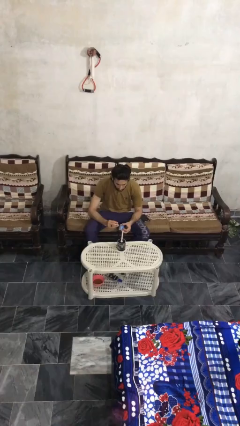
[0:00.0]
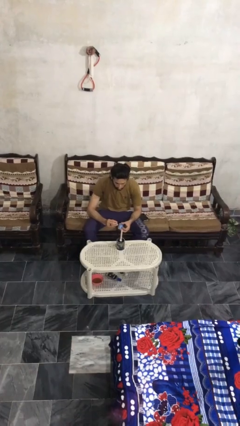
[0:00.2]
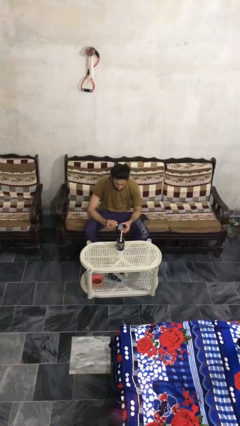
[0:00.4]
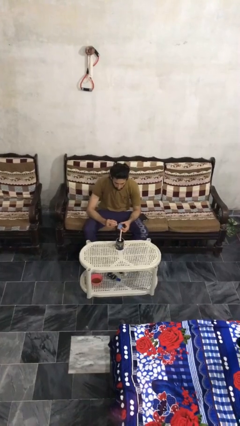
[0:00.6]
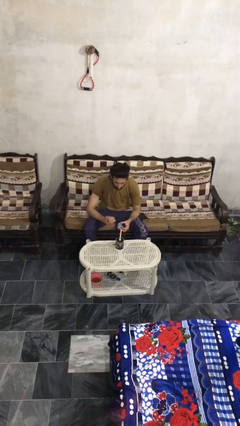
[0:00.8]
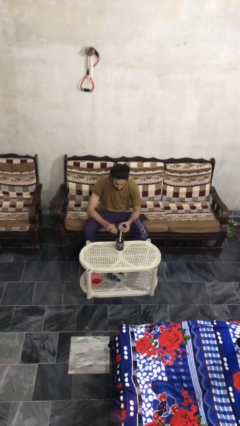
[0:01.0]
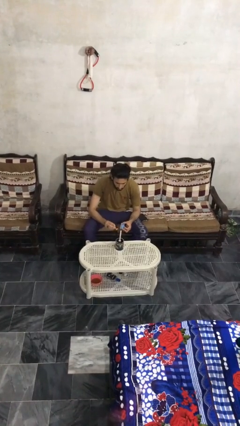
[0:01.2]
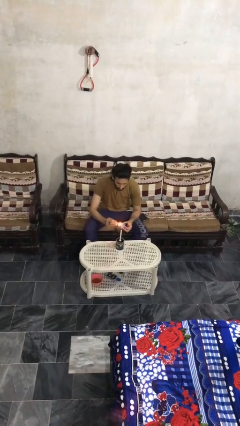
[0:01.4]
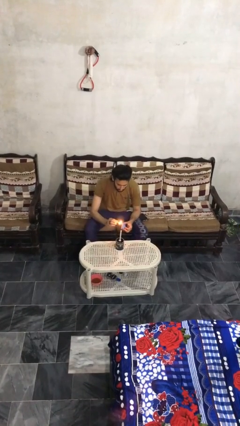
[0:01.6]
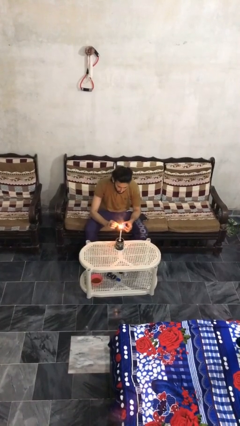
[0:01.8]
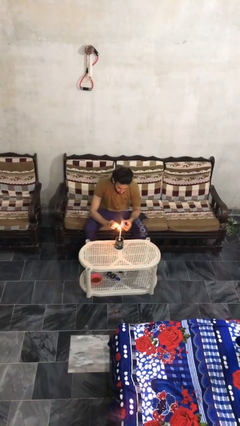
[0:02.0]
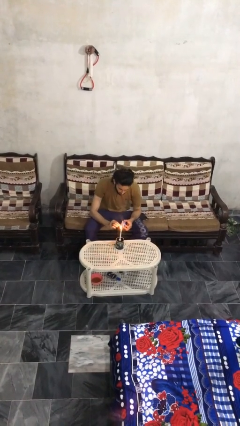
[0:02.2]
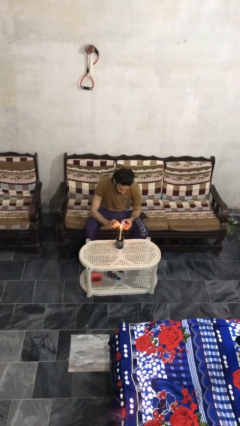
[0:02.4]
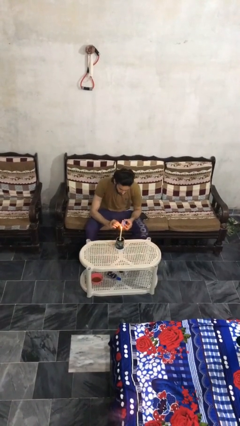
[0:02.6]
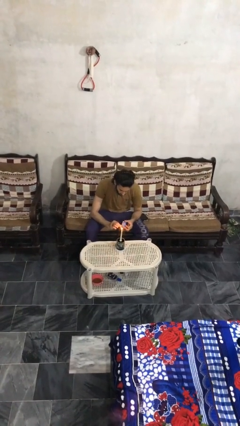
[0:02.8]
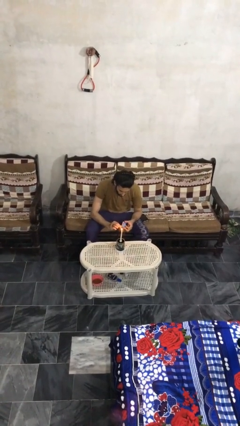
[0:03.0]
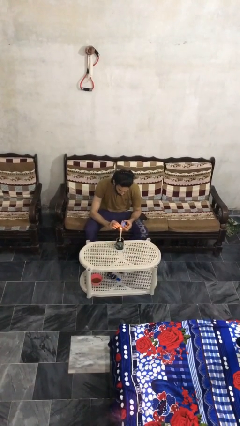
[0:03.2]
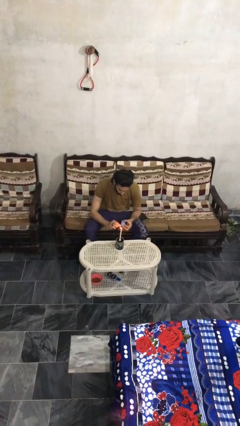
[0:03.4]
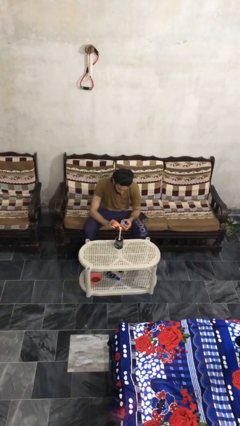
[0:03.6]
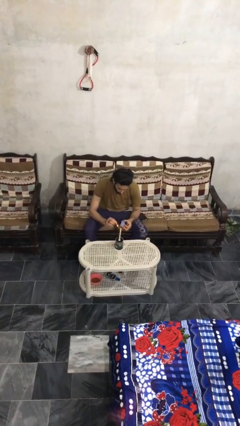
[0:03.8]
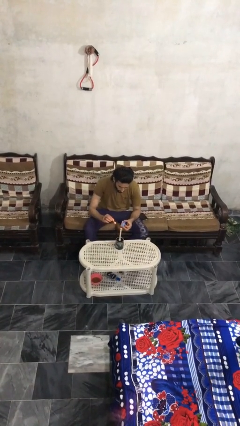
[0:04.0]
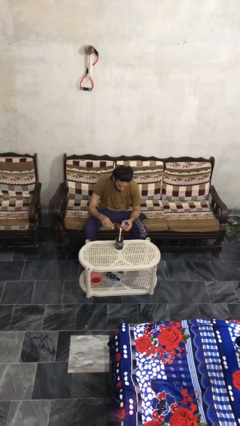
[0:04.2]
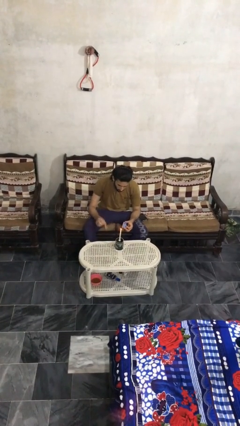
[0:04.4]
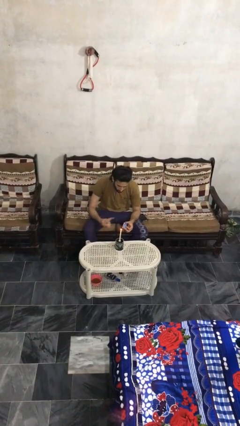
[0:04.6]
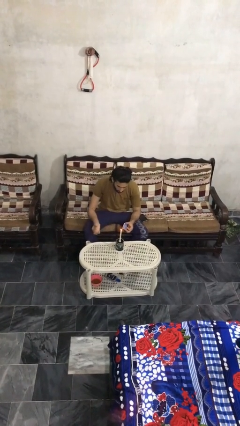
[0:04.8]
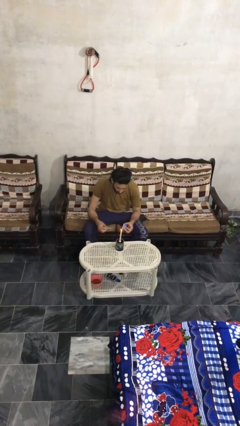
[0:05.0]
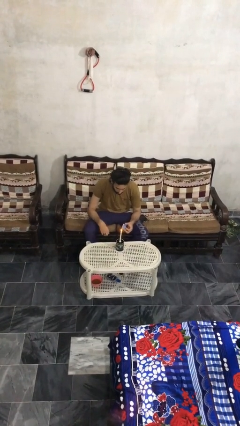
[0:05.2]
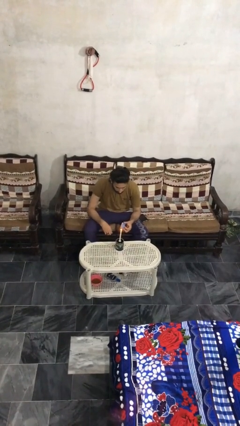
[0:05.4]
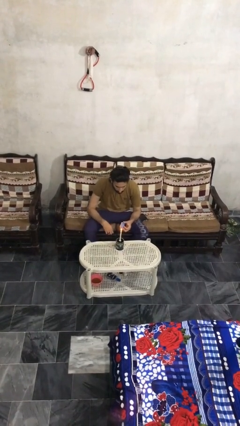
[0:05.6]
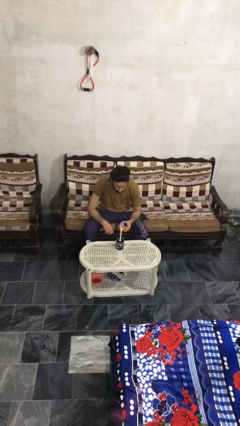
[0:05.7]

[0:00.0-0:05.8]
person lights candle

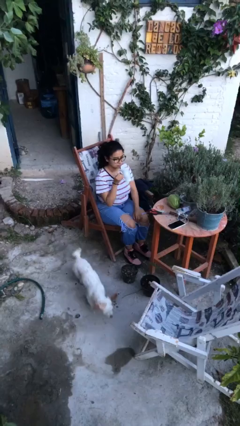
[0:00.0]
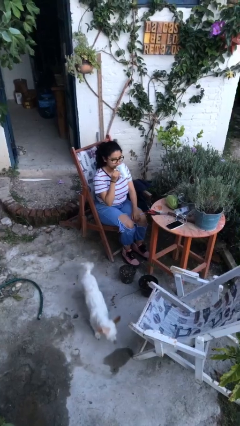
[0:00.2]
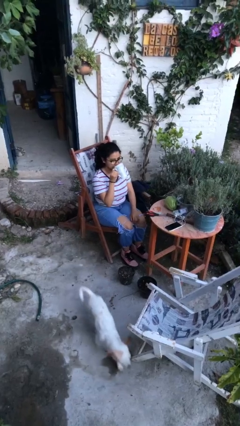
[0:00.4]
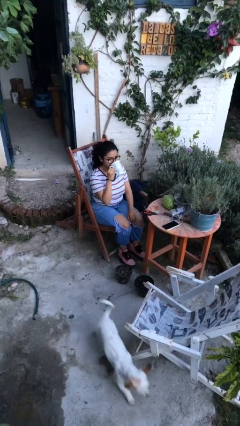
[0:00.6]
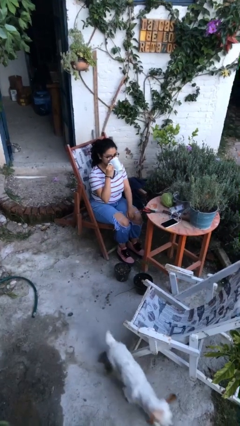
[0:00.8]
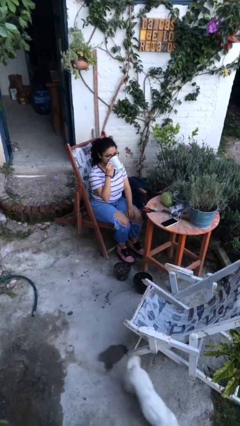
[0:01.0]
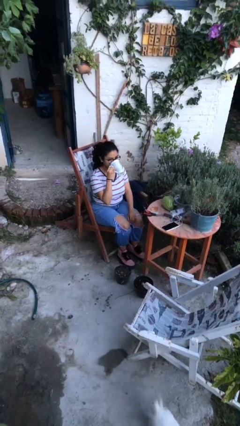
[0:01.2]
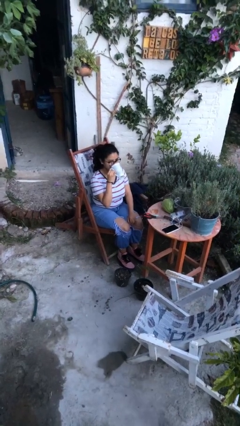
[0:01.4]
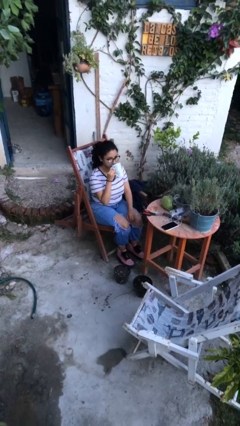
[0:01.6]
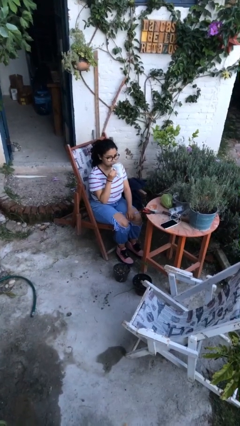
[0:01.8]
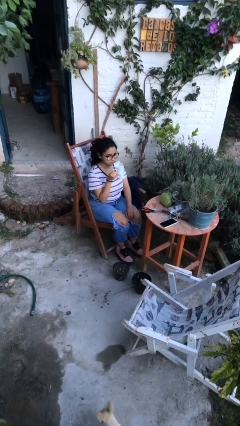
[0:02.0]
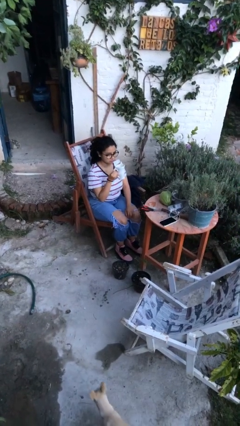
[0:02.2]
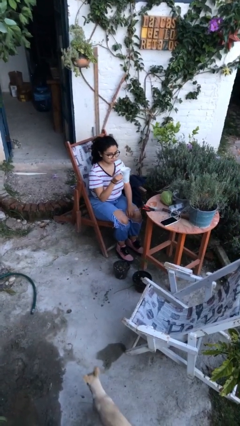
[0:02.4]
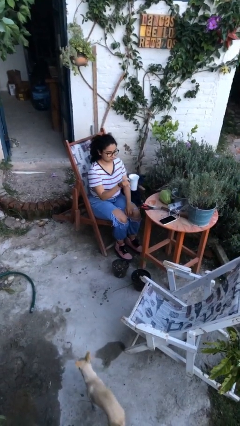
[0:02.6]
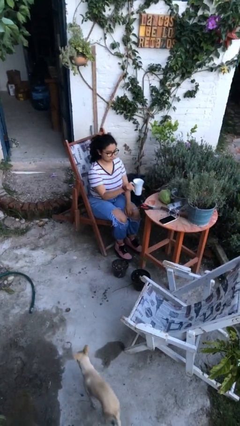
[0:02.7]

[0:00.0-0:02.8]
person drinks from mug

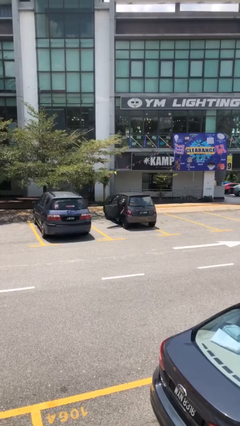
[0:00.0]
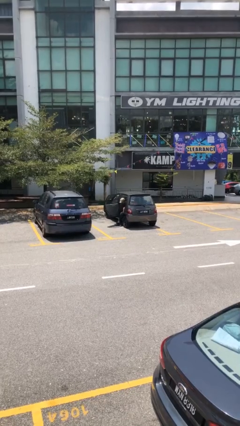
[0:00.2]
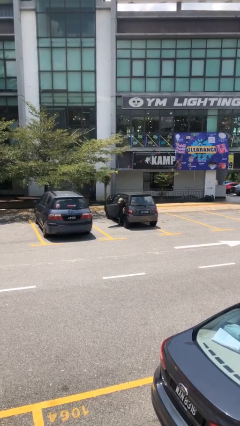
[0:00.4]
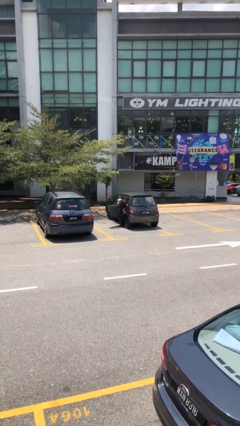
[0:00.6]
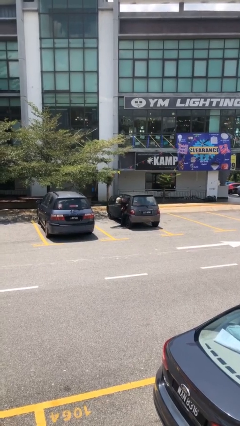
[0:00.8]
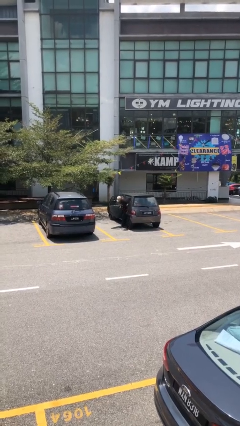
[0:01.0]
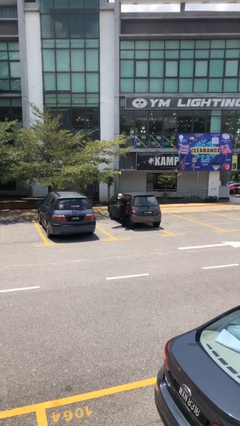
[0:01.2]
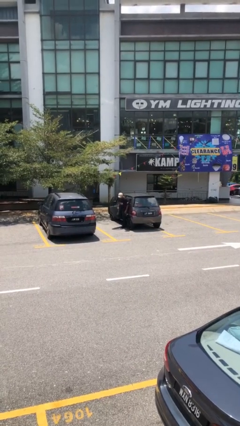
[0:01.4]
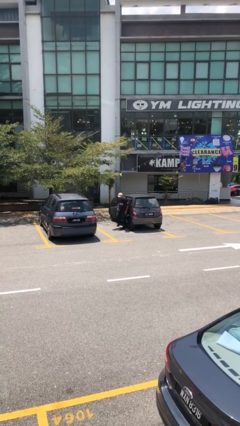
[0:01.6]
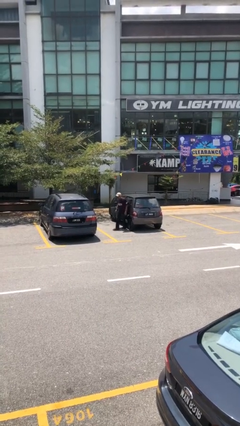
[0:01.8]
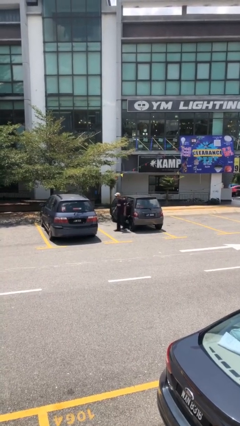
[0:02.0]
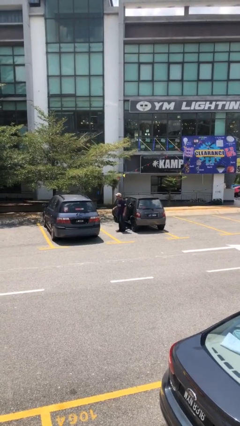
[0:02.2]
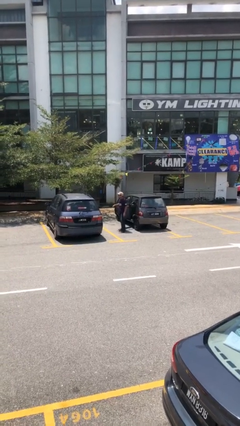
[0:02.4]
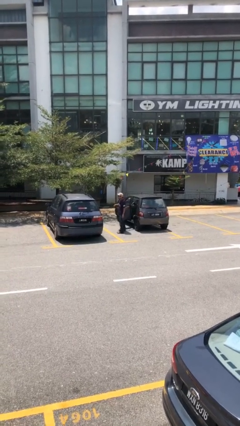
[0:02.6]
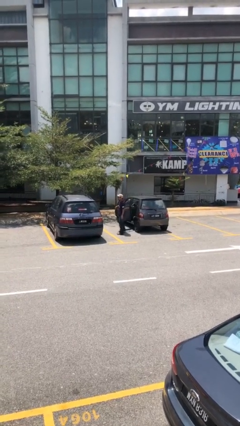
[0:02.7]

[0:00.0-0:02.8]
person exits car

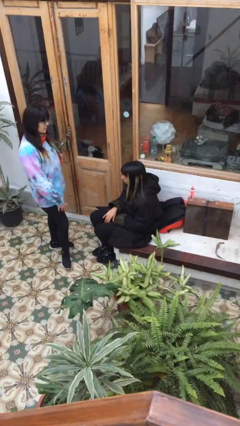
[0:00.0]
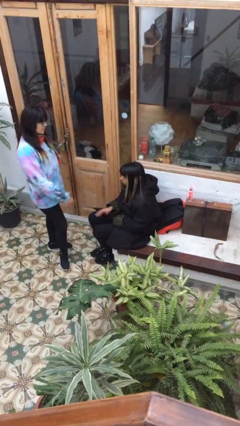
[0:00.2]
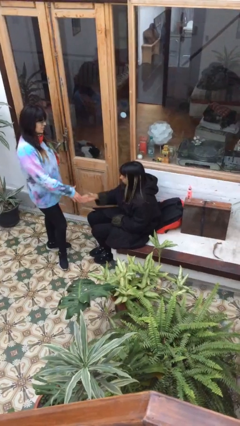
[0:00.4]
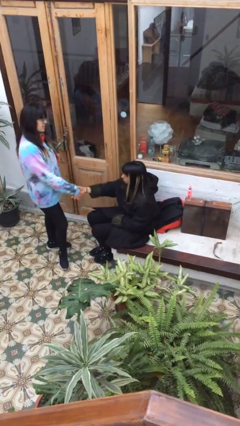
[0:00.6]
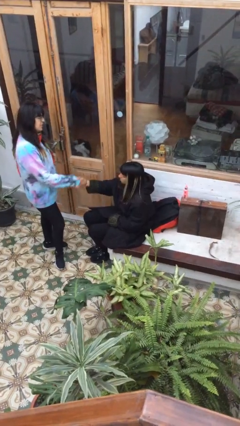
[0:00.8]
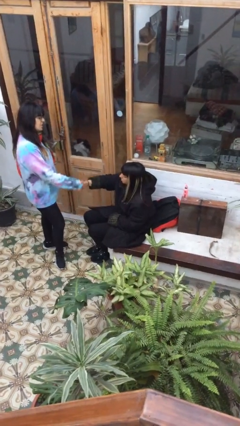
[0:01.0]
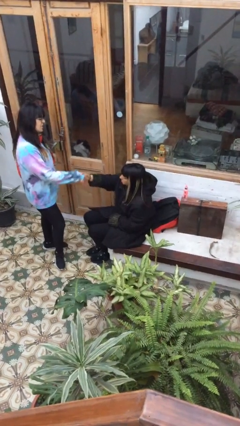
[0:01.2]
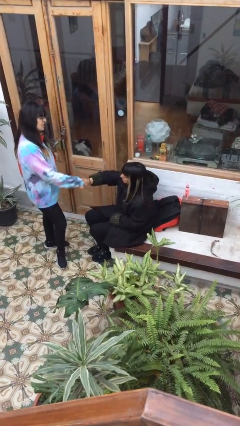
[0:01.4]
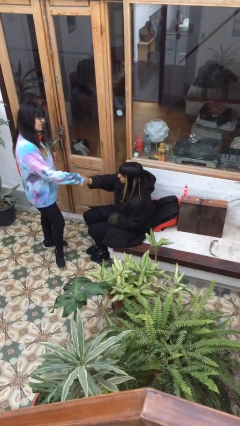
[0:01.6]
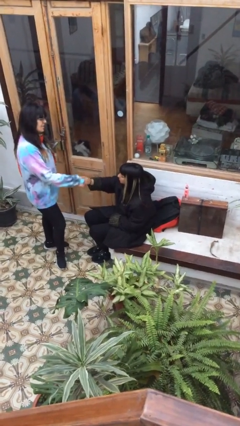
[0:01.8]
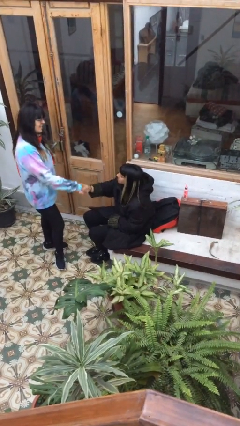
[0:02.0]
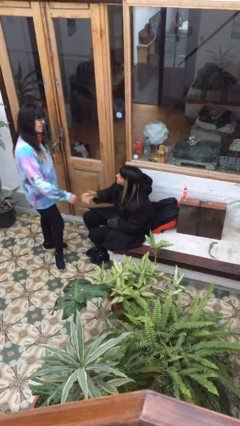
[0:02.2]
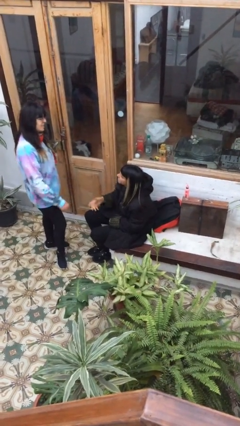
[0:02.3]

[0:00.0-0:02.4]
person shakes hand

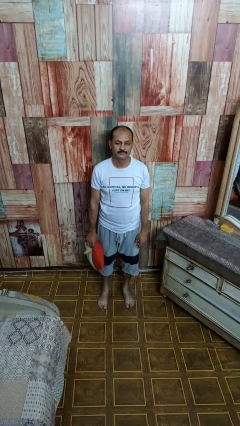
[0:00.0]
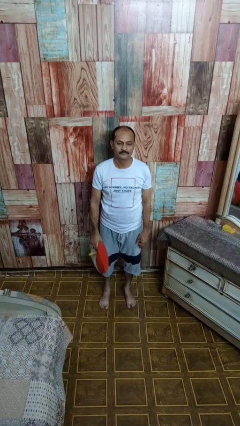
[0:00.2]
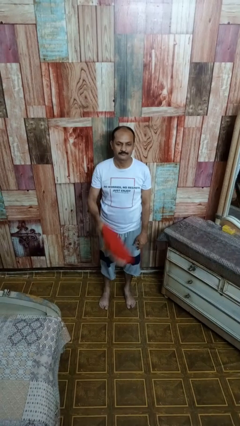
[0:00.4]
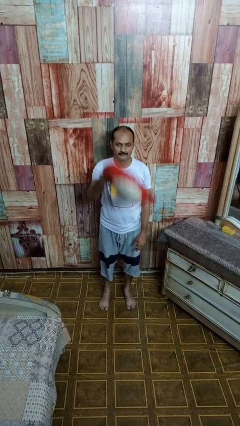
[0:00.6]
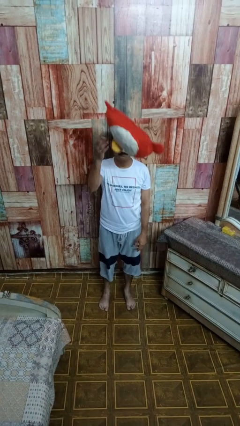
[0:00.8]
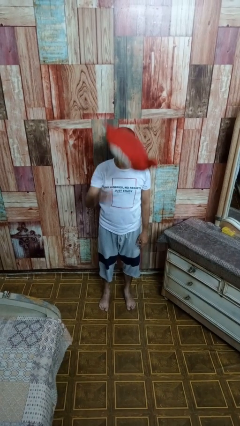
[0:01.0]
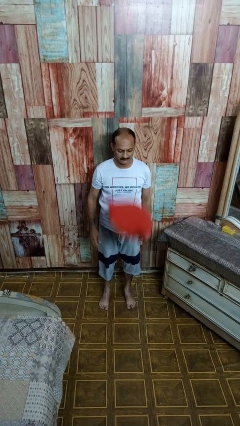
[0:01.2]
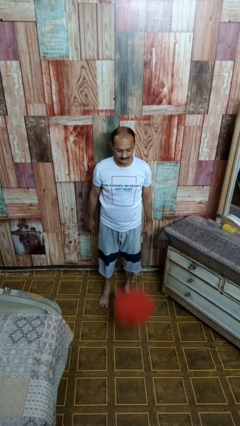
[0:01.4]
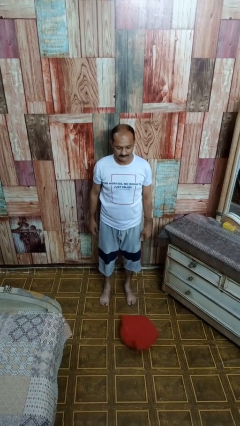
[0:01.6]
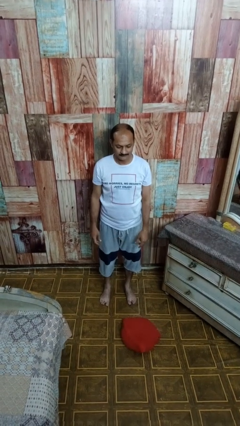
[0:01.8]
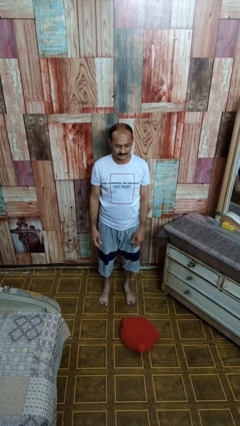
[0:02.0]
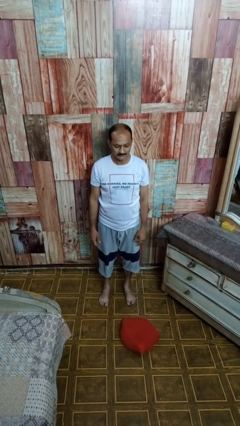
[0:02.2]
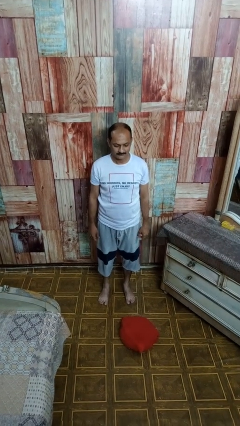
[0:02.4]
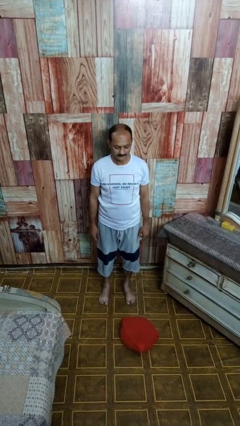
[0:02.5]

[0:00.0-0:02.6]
person throws object into air

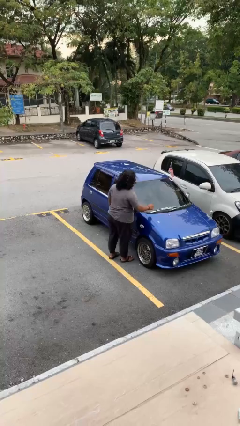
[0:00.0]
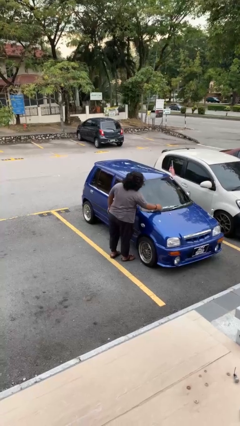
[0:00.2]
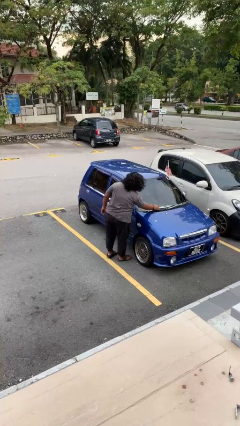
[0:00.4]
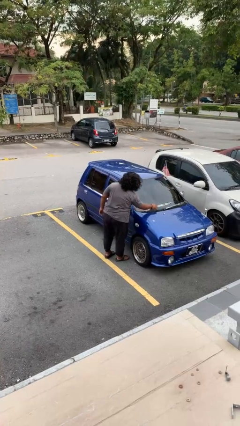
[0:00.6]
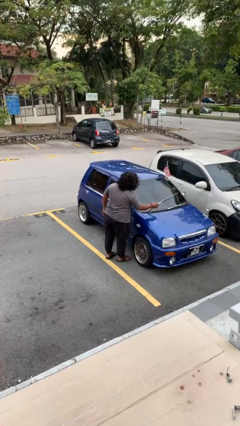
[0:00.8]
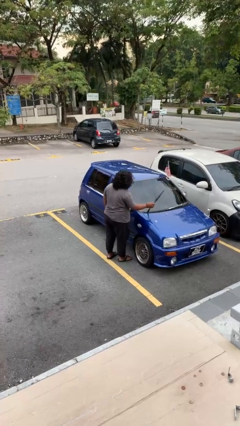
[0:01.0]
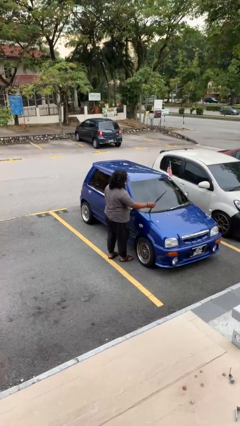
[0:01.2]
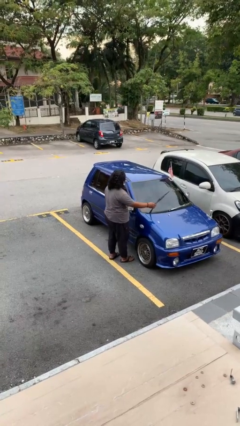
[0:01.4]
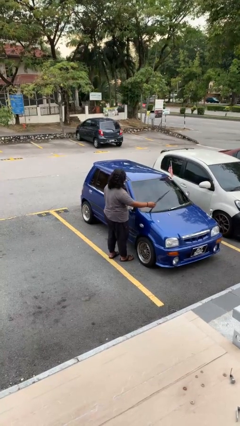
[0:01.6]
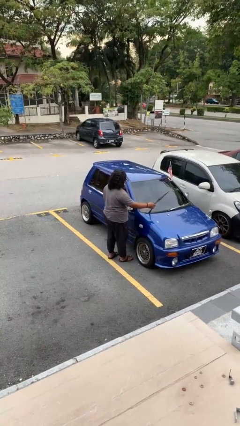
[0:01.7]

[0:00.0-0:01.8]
person flips up car wipers
